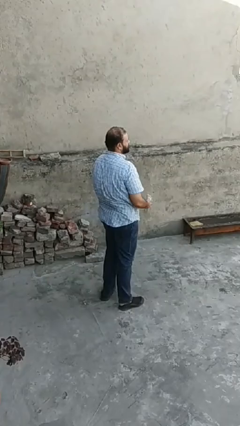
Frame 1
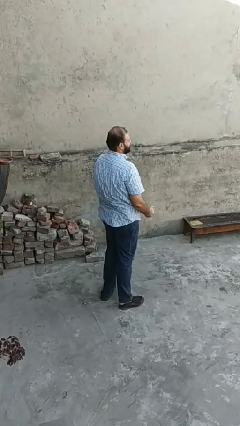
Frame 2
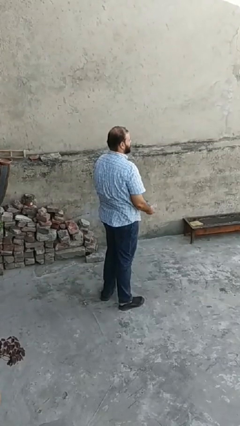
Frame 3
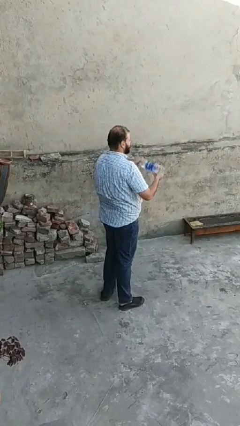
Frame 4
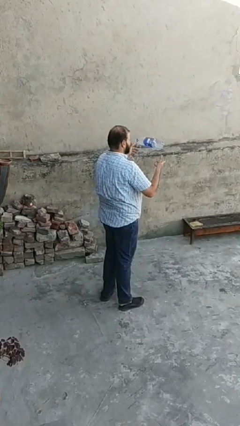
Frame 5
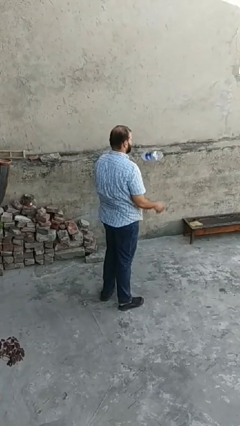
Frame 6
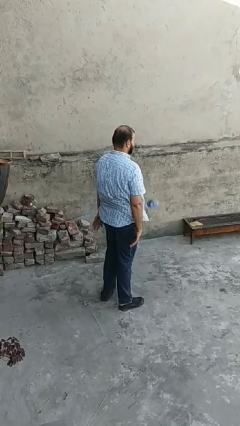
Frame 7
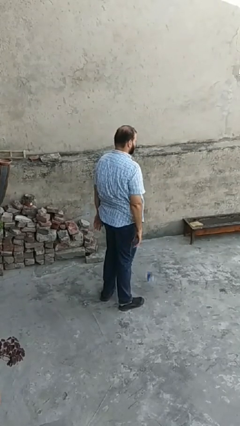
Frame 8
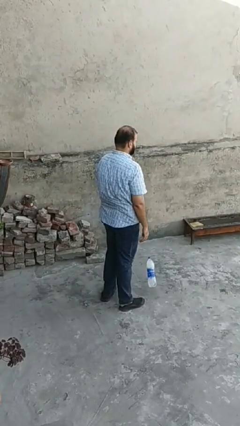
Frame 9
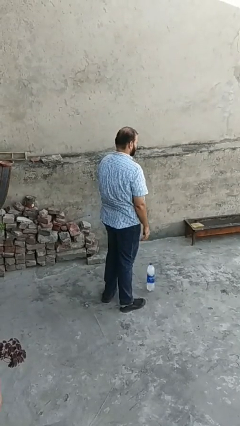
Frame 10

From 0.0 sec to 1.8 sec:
person throws object into air

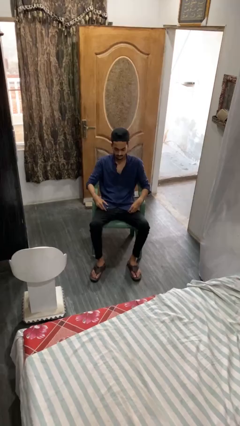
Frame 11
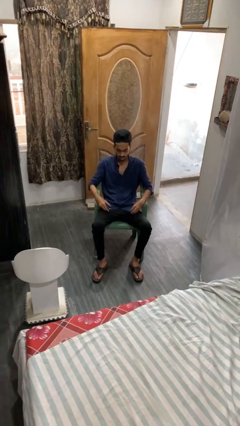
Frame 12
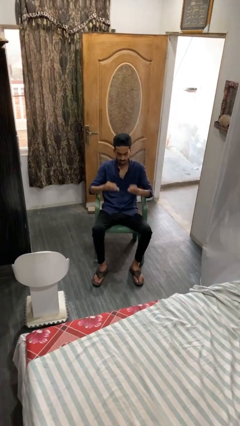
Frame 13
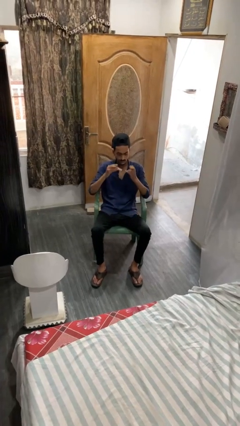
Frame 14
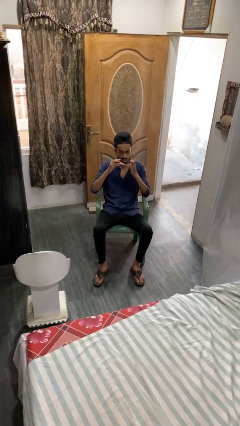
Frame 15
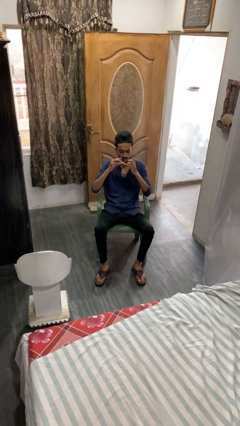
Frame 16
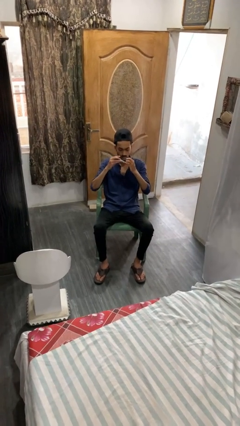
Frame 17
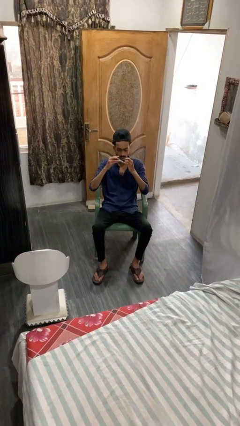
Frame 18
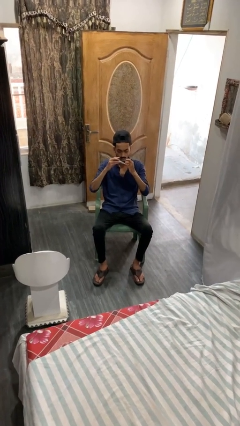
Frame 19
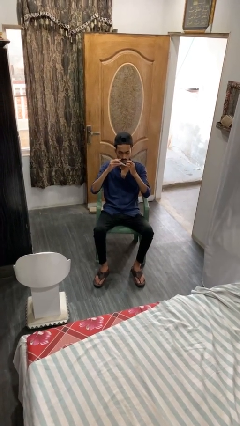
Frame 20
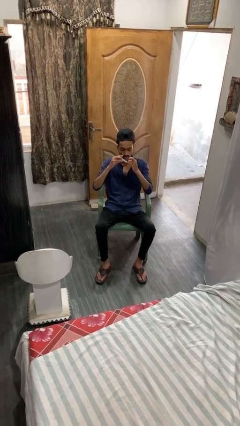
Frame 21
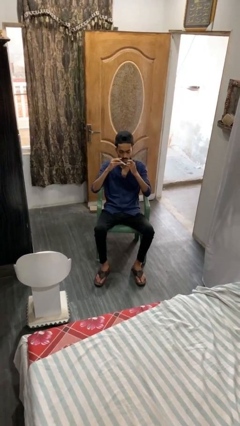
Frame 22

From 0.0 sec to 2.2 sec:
person clips fingernails

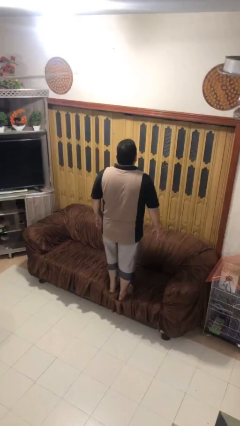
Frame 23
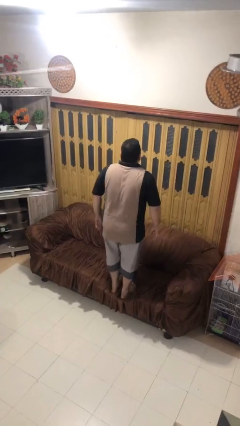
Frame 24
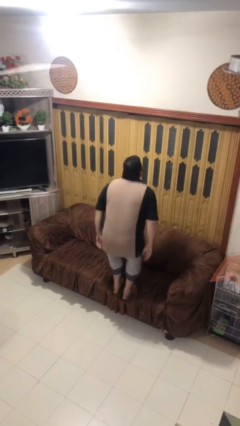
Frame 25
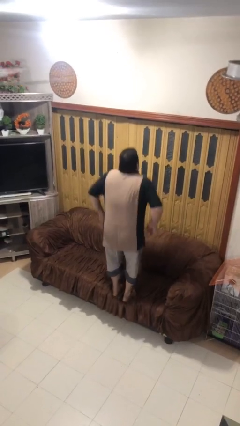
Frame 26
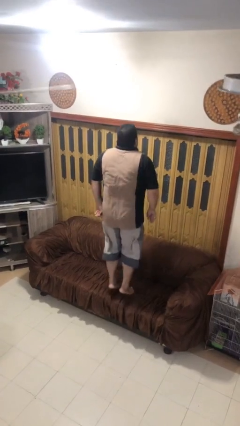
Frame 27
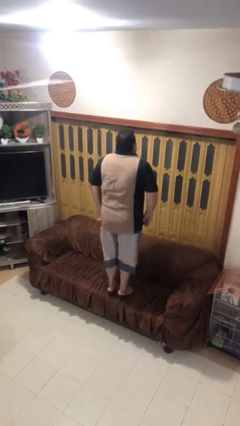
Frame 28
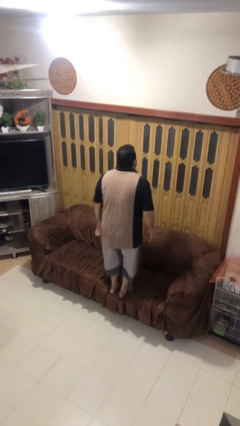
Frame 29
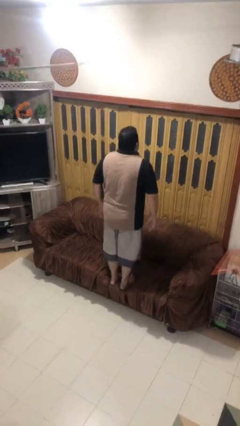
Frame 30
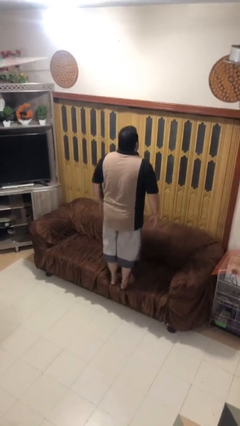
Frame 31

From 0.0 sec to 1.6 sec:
person jumps on couch

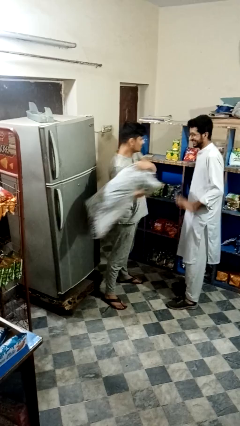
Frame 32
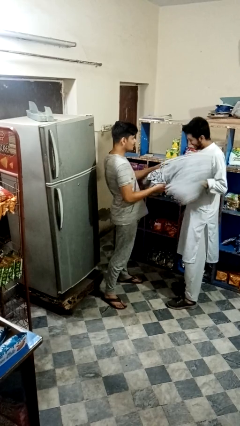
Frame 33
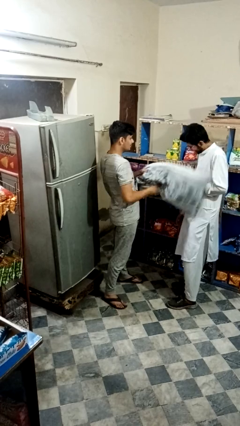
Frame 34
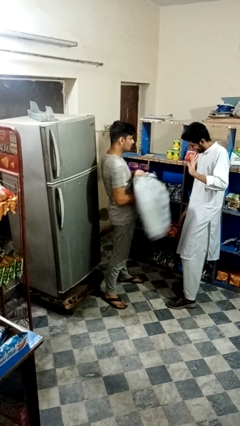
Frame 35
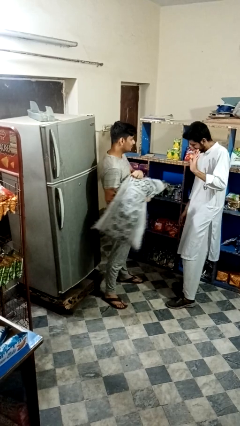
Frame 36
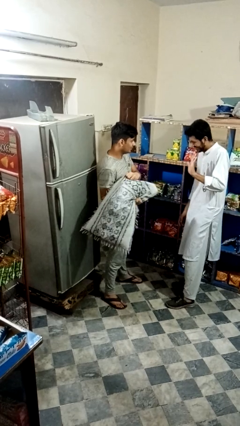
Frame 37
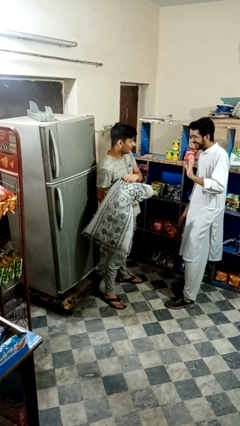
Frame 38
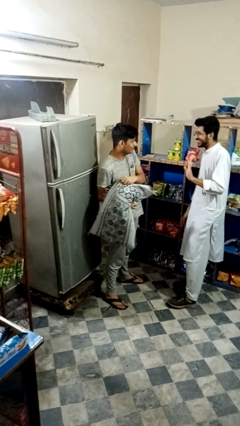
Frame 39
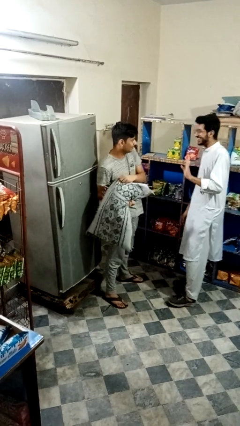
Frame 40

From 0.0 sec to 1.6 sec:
person hits person with pillow

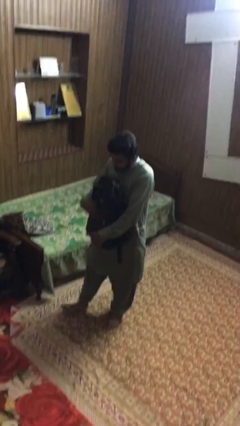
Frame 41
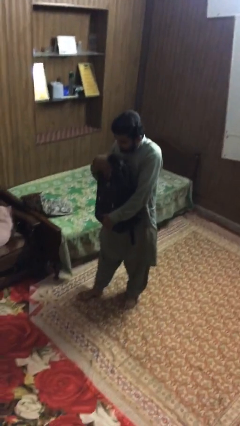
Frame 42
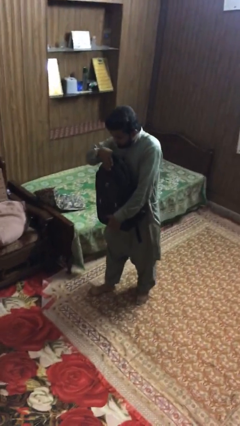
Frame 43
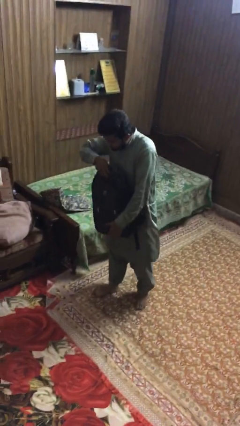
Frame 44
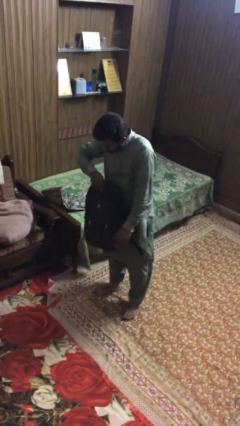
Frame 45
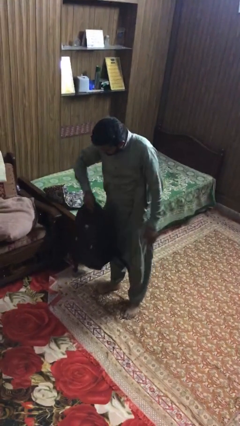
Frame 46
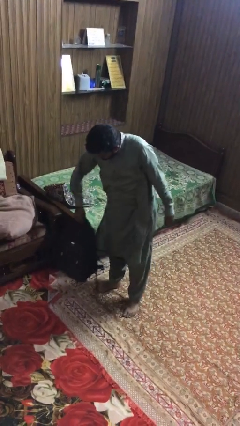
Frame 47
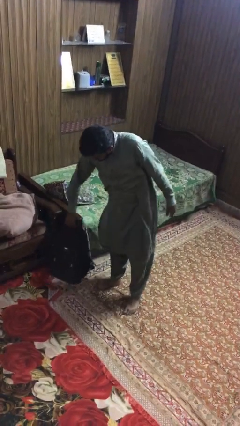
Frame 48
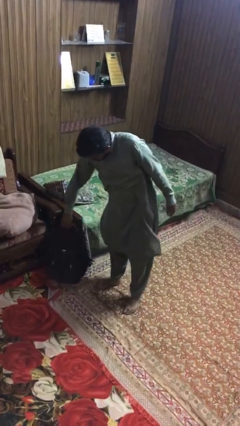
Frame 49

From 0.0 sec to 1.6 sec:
person puts down object on floor

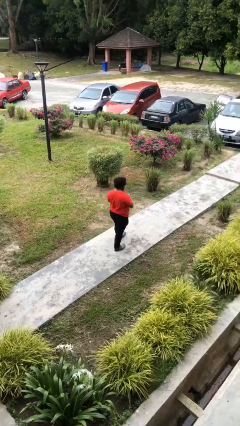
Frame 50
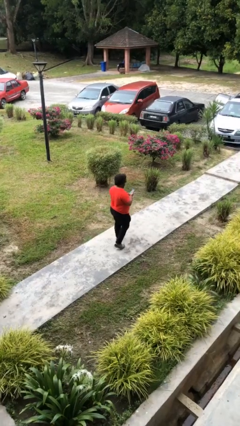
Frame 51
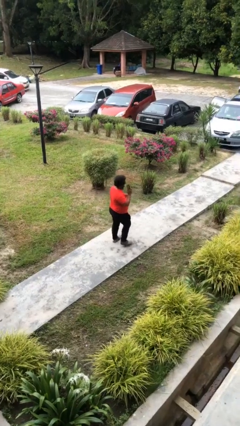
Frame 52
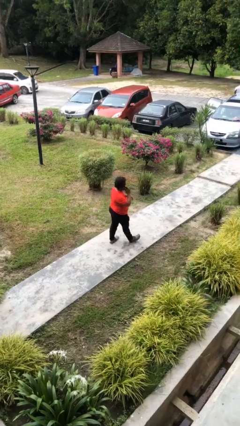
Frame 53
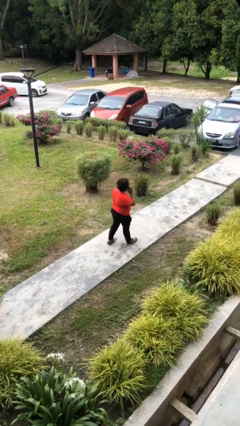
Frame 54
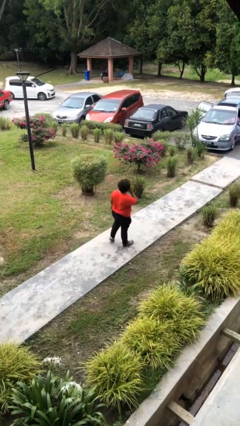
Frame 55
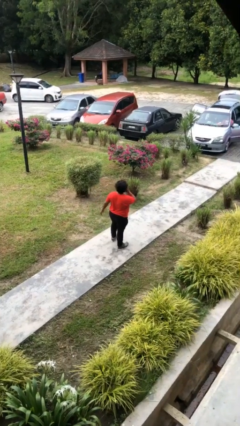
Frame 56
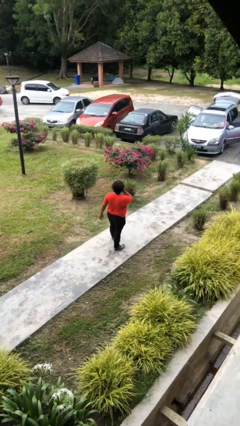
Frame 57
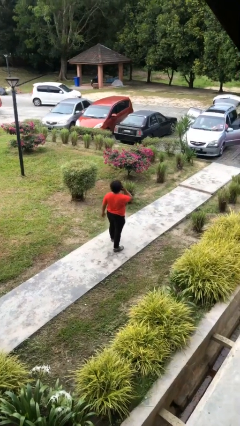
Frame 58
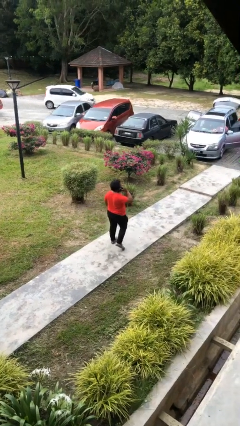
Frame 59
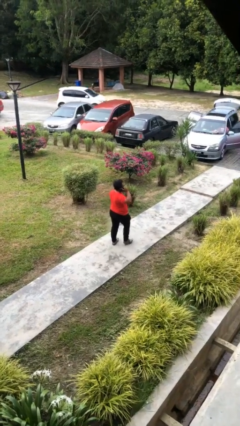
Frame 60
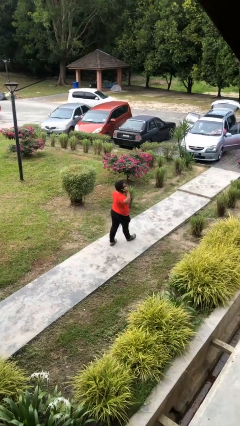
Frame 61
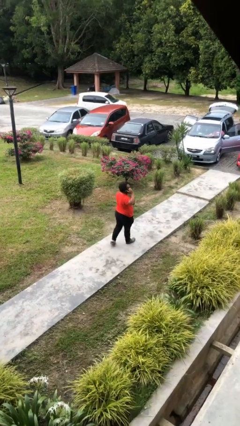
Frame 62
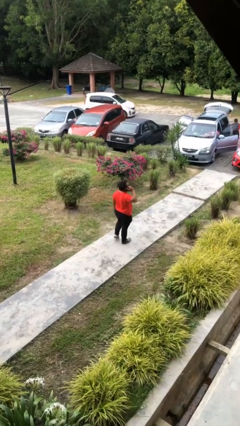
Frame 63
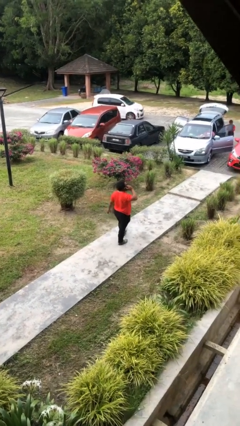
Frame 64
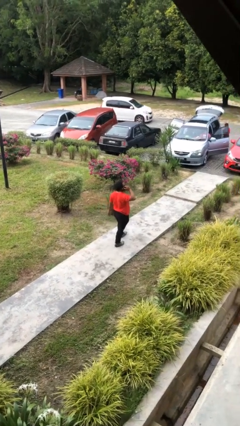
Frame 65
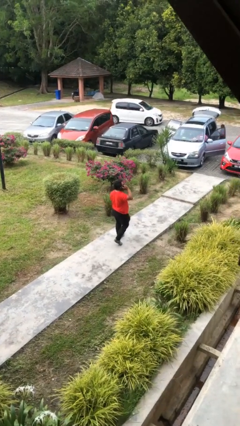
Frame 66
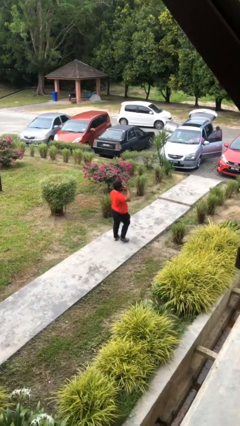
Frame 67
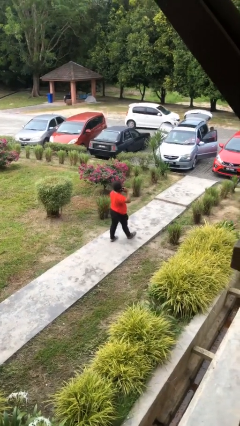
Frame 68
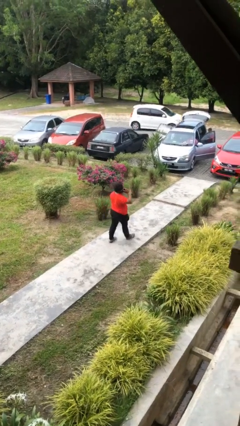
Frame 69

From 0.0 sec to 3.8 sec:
person talks on phone

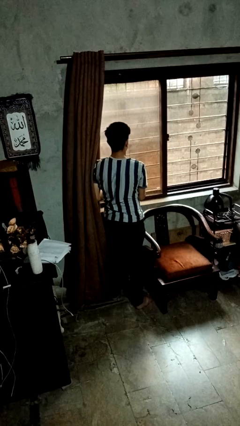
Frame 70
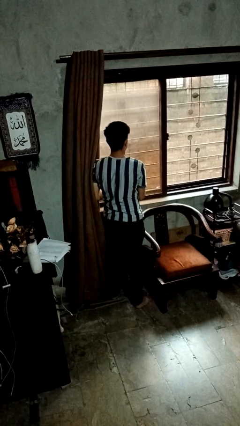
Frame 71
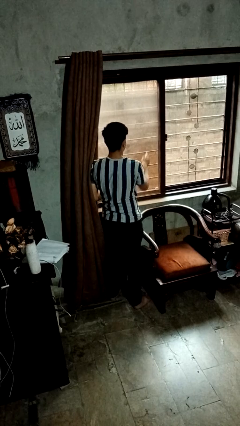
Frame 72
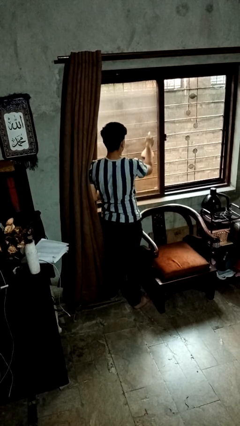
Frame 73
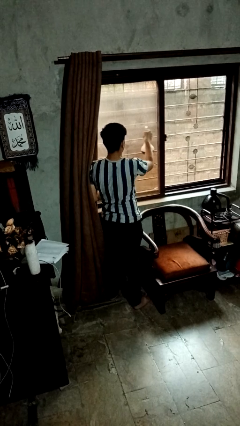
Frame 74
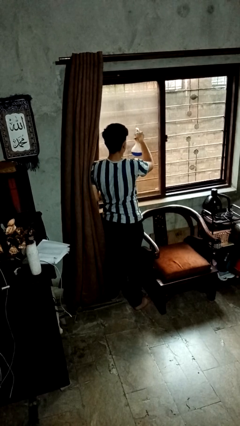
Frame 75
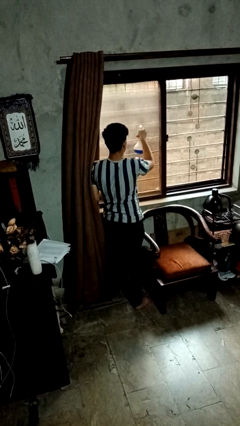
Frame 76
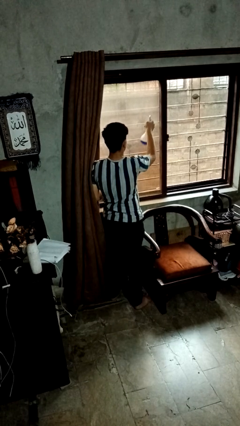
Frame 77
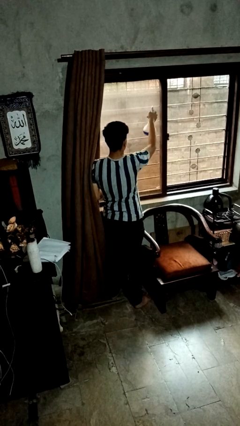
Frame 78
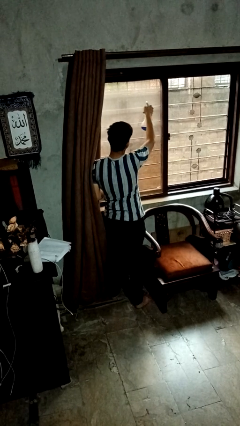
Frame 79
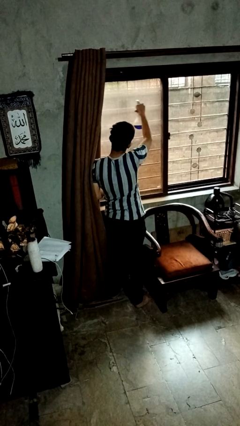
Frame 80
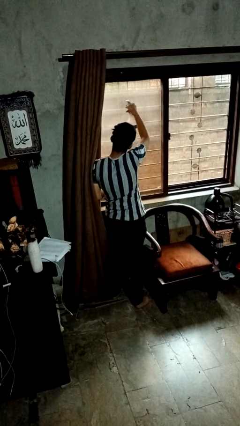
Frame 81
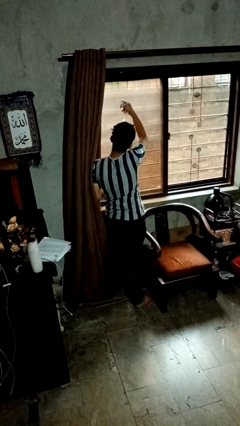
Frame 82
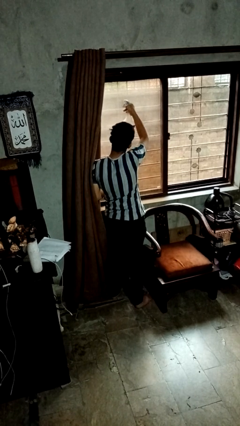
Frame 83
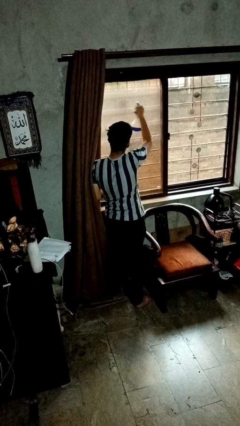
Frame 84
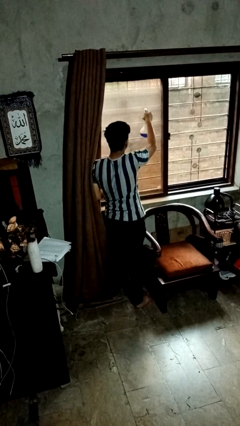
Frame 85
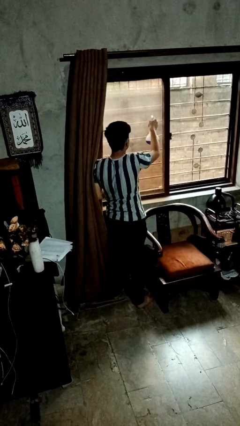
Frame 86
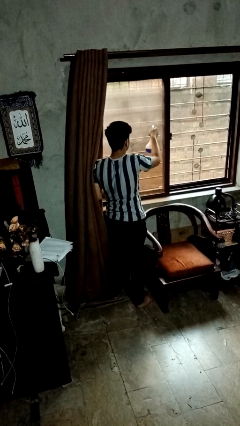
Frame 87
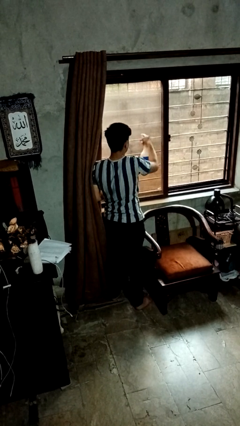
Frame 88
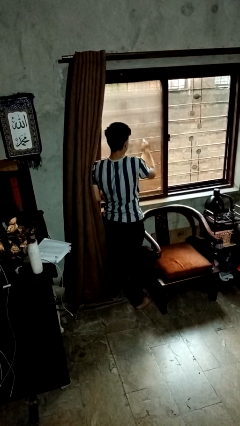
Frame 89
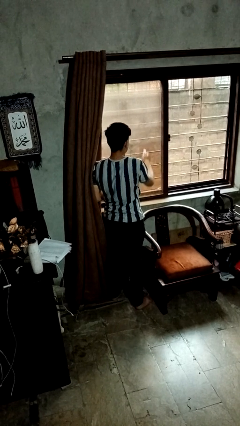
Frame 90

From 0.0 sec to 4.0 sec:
person sprays from bottle

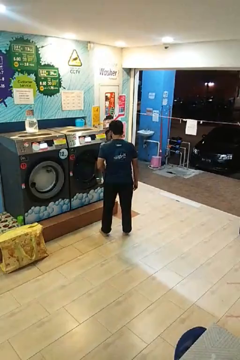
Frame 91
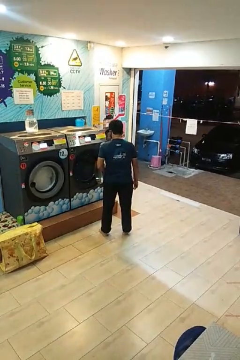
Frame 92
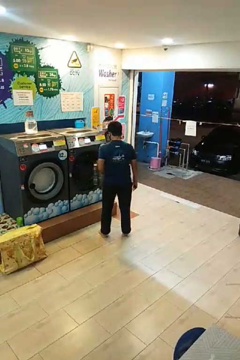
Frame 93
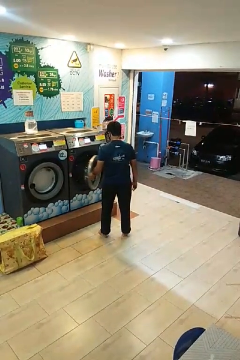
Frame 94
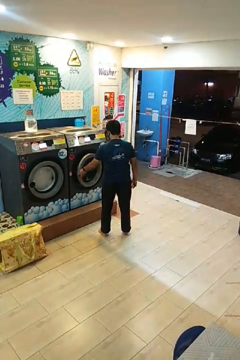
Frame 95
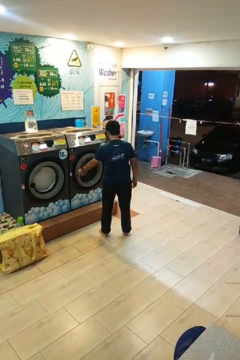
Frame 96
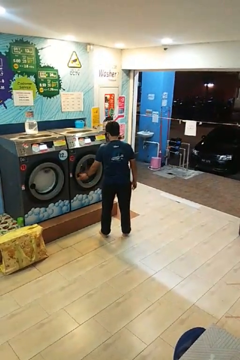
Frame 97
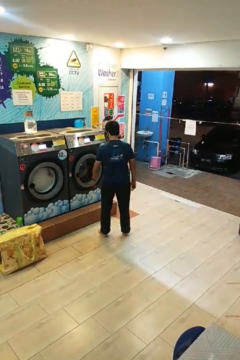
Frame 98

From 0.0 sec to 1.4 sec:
person closes clothes washer
